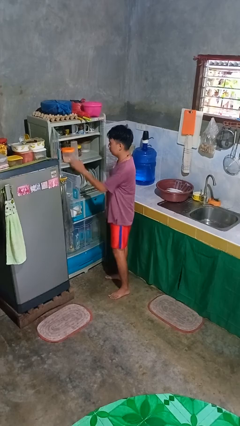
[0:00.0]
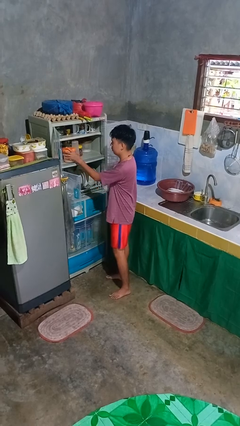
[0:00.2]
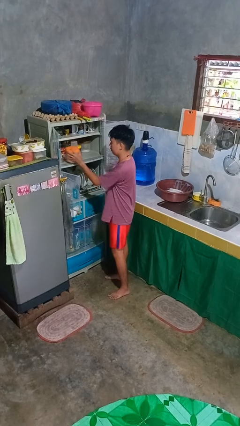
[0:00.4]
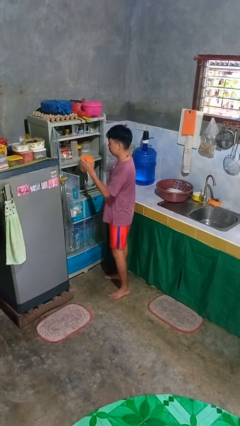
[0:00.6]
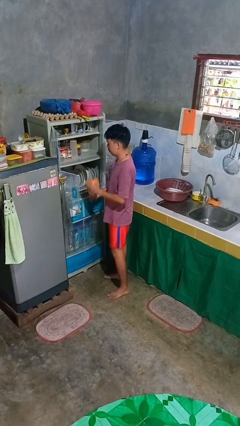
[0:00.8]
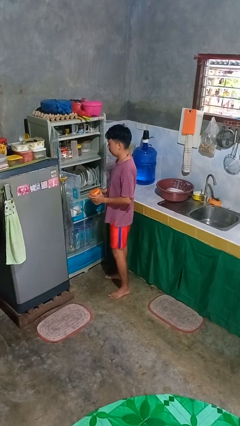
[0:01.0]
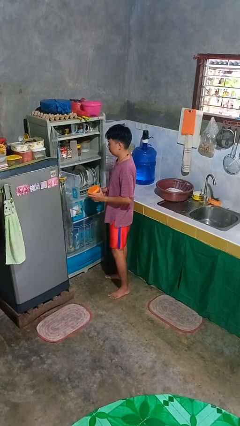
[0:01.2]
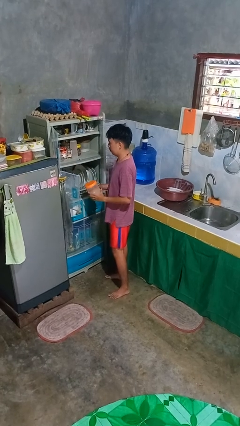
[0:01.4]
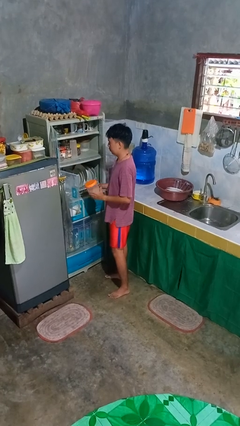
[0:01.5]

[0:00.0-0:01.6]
person takes object from cabinet

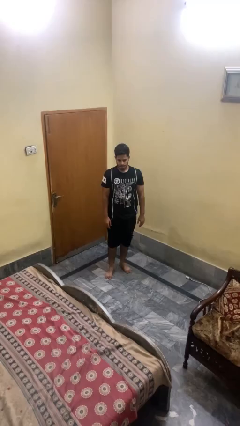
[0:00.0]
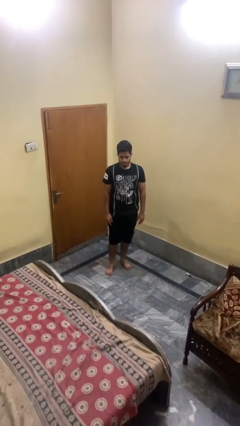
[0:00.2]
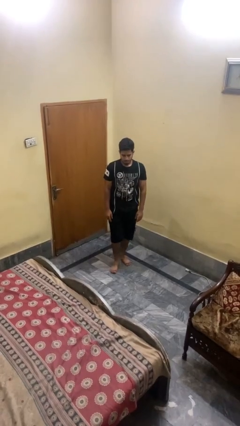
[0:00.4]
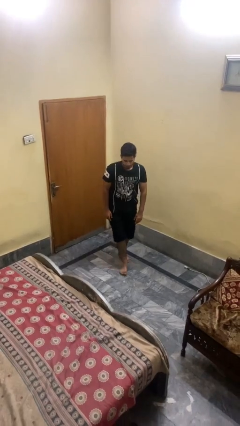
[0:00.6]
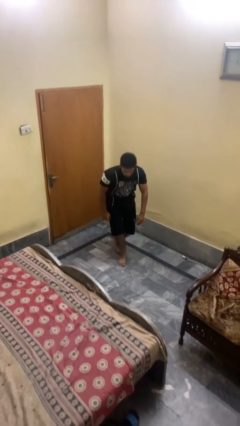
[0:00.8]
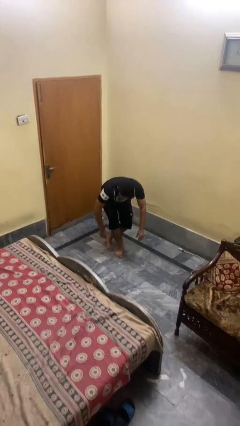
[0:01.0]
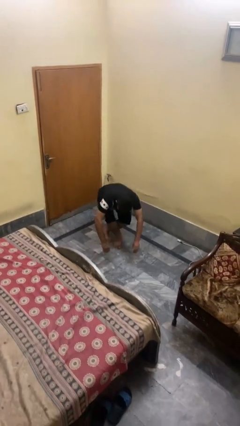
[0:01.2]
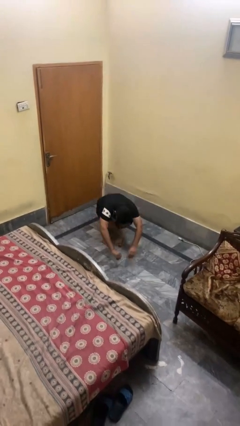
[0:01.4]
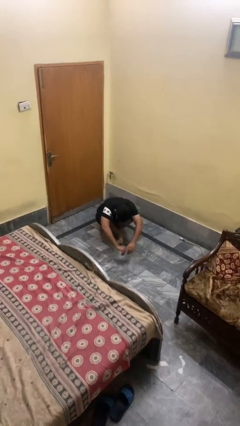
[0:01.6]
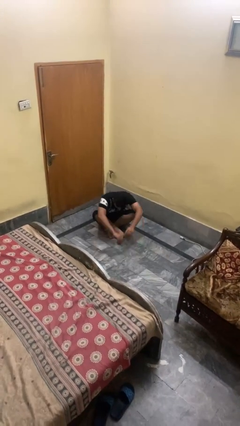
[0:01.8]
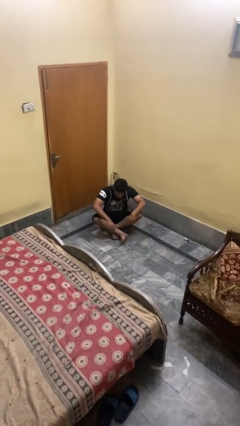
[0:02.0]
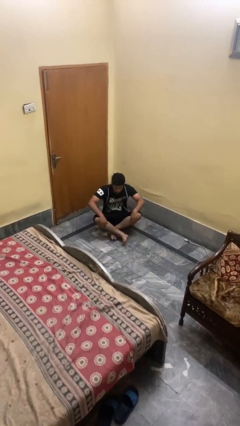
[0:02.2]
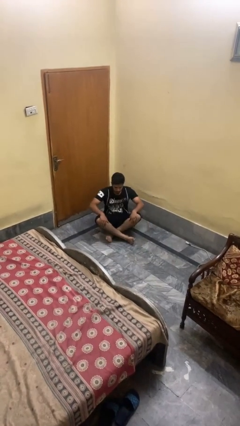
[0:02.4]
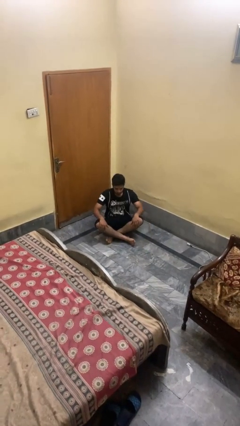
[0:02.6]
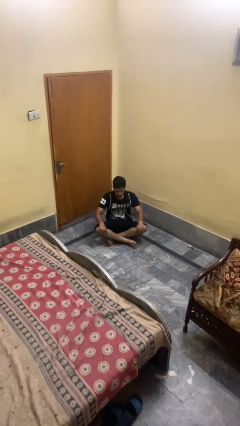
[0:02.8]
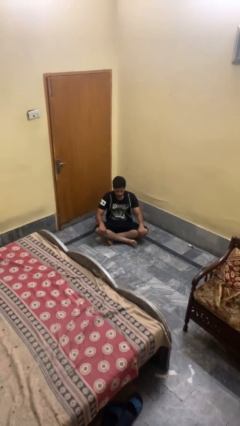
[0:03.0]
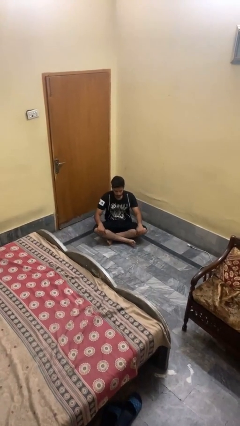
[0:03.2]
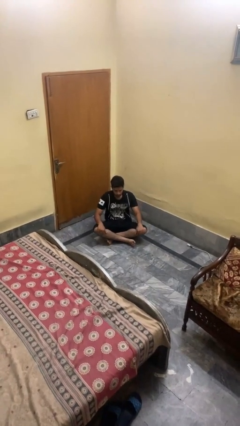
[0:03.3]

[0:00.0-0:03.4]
person sits crisscross

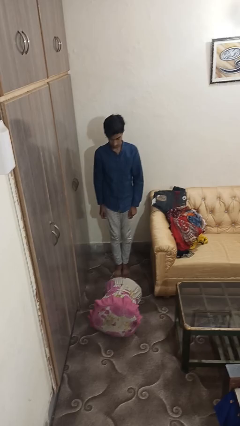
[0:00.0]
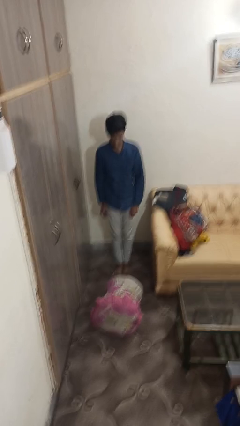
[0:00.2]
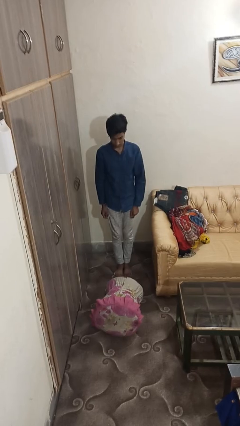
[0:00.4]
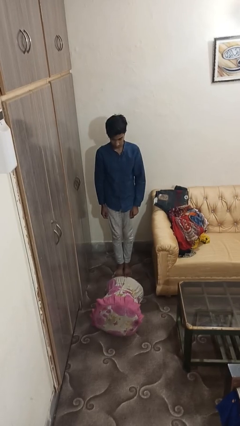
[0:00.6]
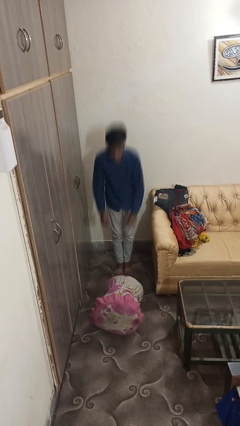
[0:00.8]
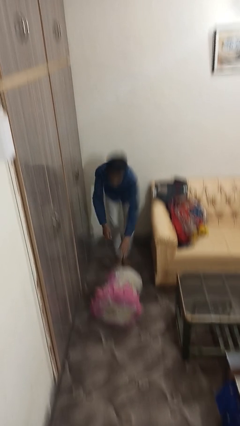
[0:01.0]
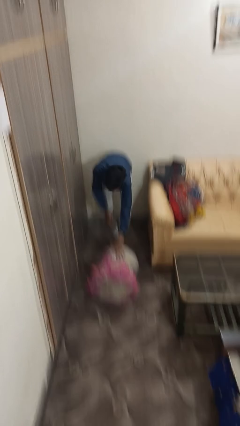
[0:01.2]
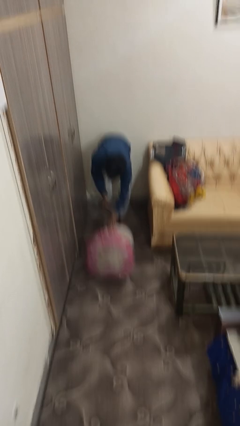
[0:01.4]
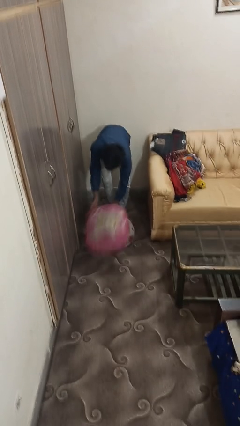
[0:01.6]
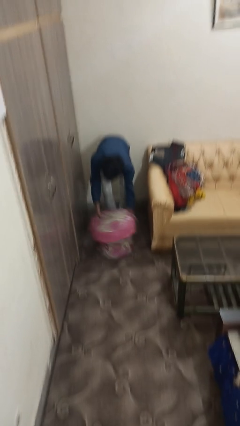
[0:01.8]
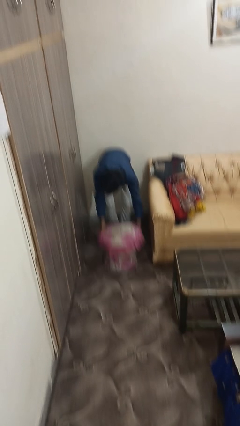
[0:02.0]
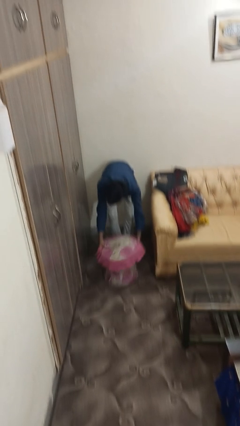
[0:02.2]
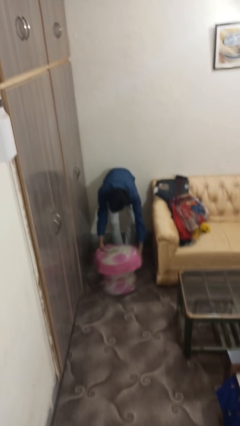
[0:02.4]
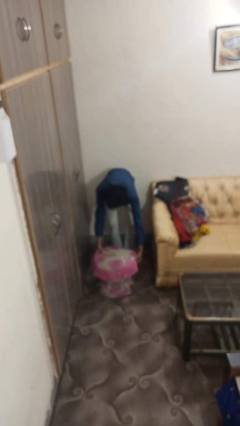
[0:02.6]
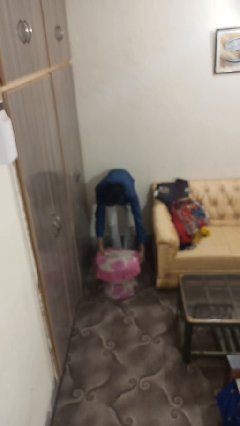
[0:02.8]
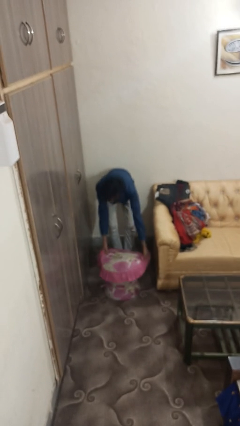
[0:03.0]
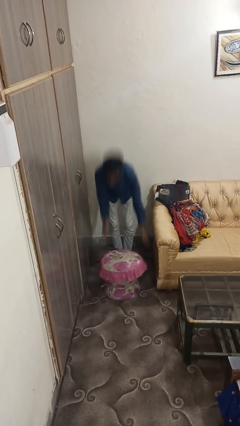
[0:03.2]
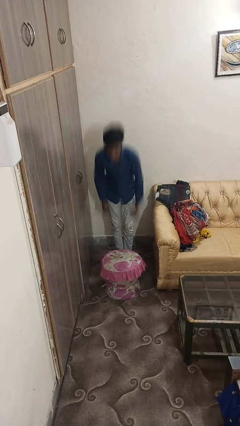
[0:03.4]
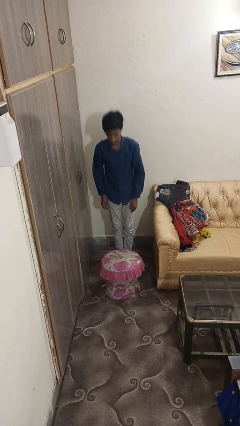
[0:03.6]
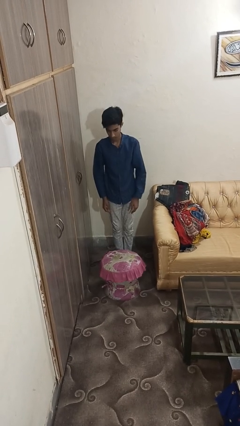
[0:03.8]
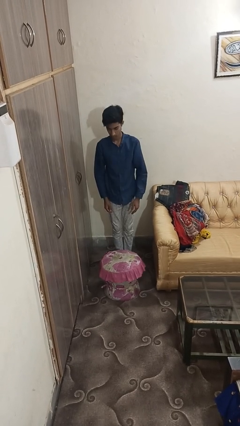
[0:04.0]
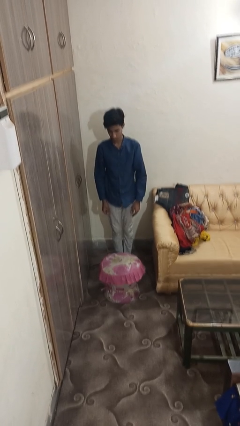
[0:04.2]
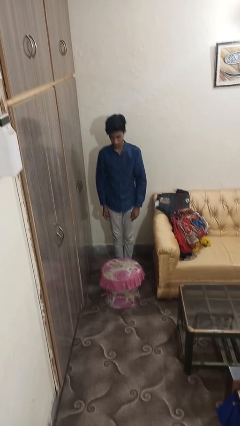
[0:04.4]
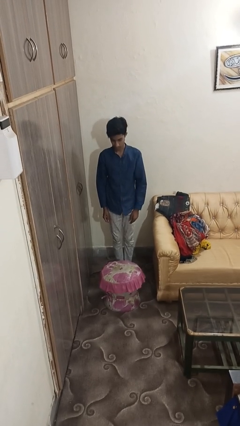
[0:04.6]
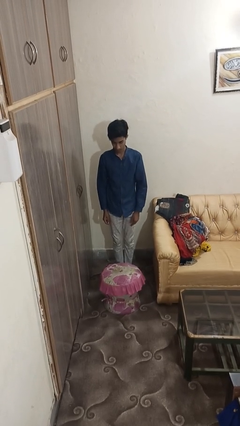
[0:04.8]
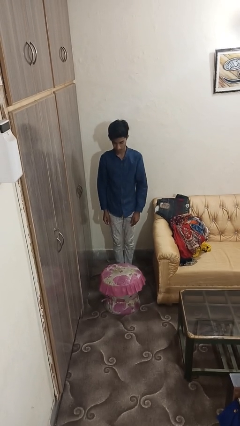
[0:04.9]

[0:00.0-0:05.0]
person sets upright furniture

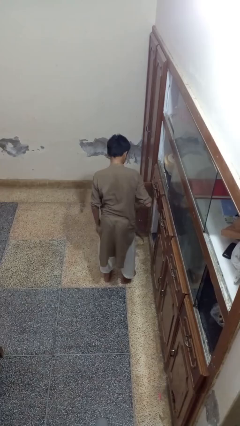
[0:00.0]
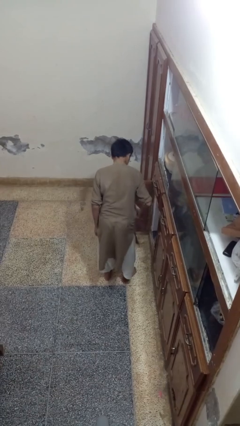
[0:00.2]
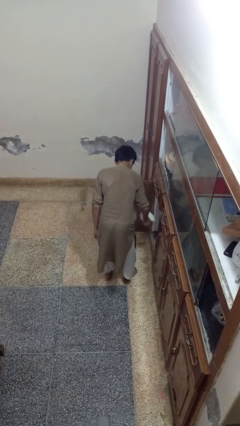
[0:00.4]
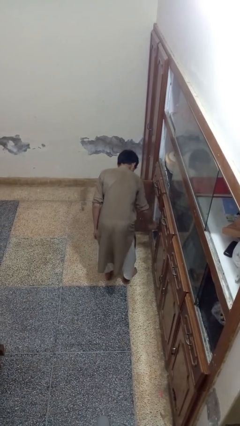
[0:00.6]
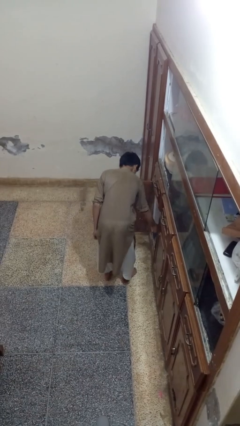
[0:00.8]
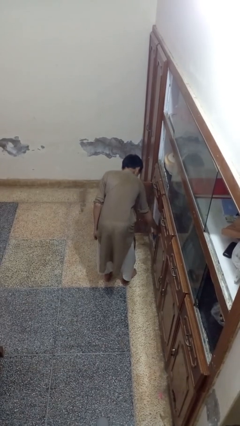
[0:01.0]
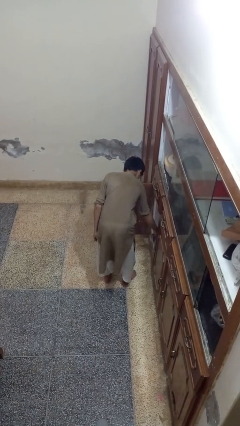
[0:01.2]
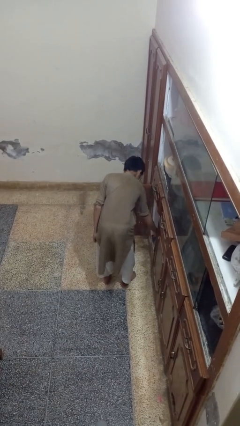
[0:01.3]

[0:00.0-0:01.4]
person puts object in cabinet

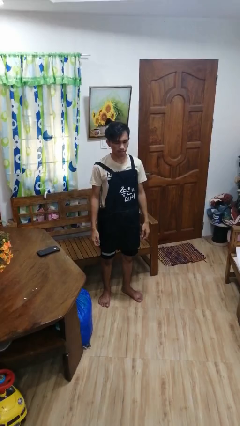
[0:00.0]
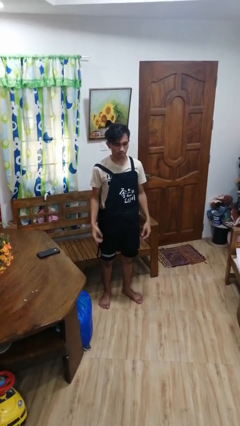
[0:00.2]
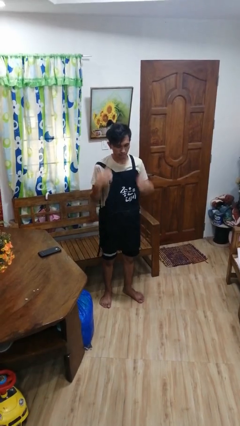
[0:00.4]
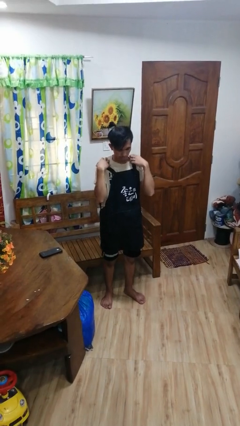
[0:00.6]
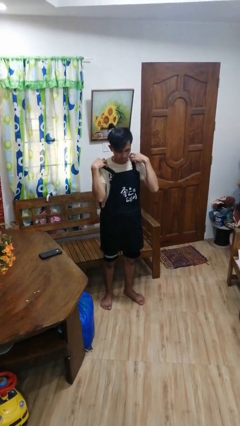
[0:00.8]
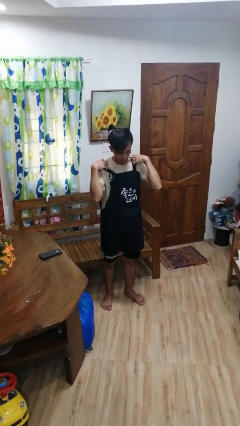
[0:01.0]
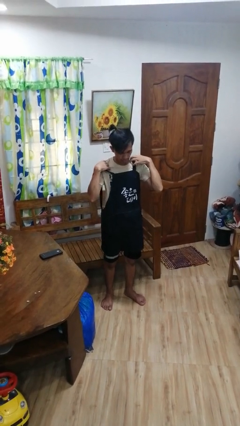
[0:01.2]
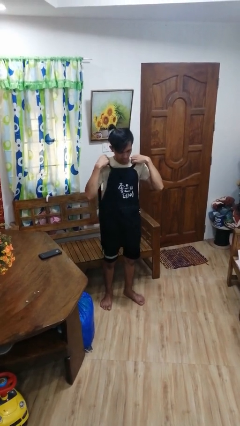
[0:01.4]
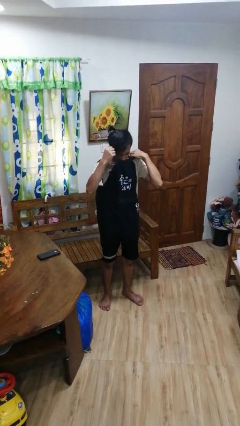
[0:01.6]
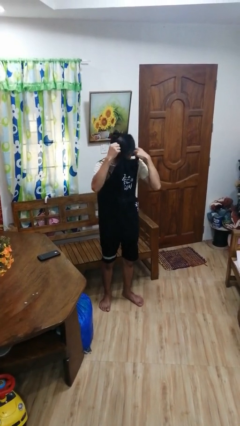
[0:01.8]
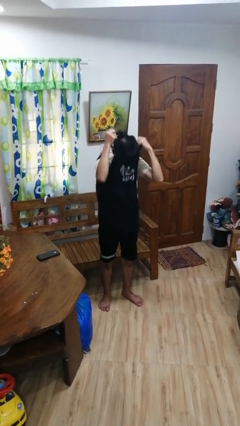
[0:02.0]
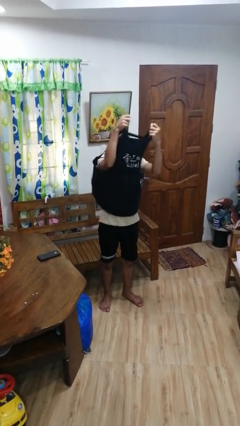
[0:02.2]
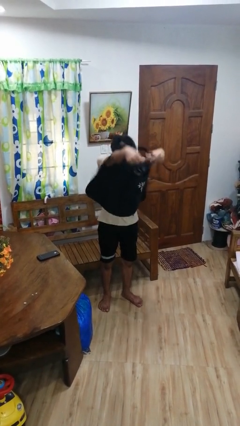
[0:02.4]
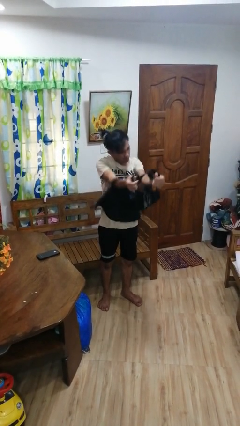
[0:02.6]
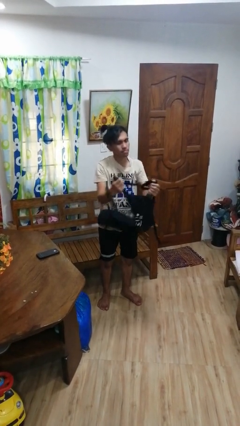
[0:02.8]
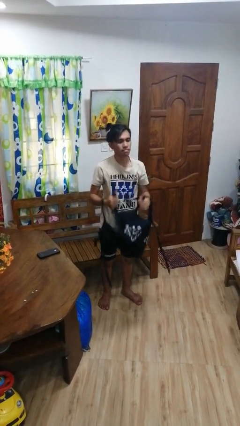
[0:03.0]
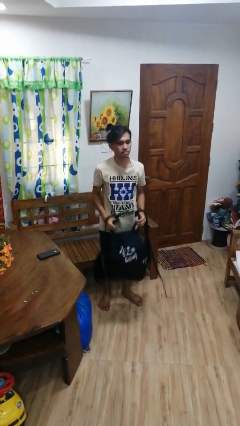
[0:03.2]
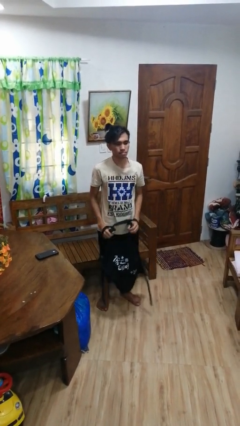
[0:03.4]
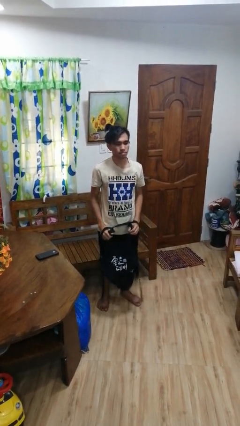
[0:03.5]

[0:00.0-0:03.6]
person takes off apron

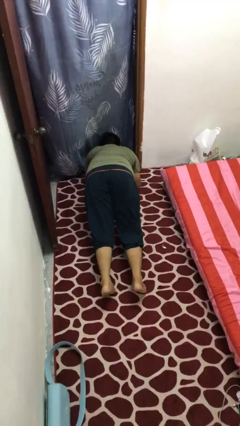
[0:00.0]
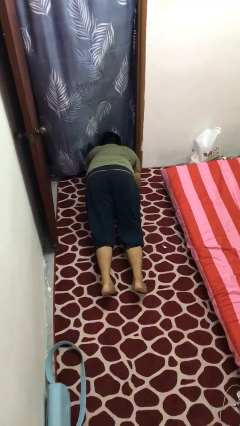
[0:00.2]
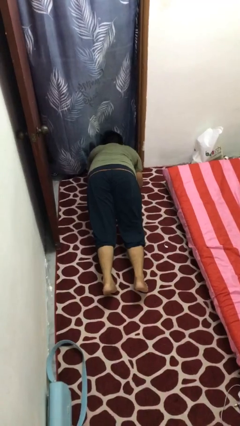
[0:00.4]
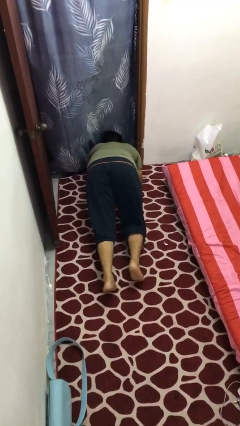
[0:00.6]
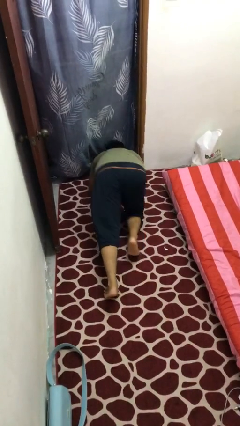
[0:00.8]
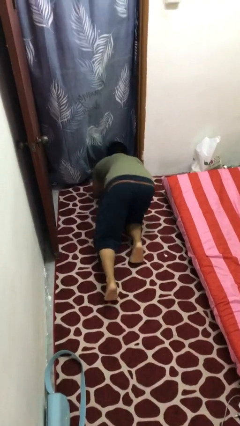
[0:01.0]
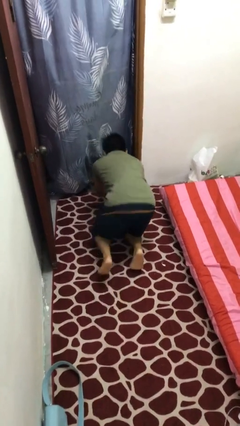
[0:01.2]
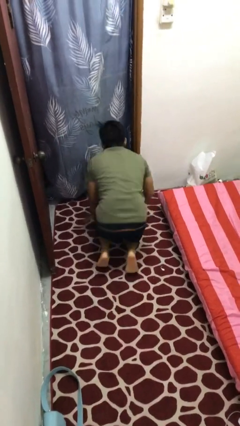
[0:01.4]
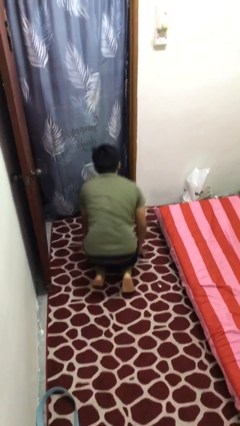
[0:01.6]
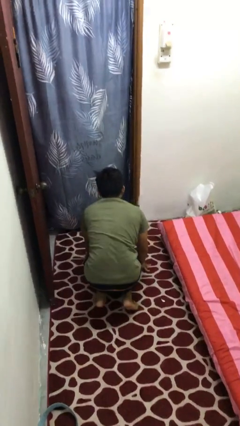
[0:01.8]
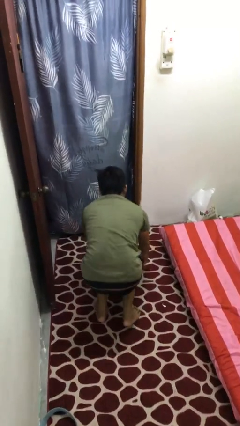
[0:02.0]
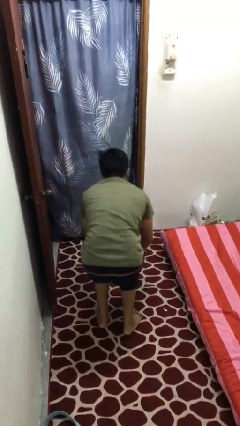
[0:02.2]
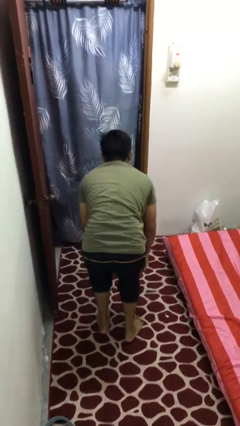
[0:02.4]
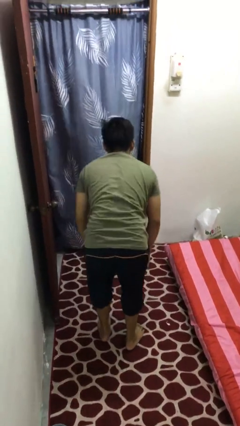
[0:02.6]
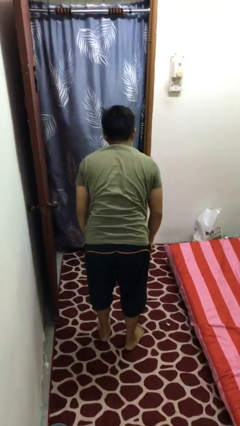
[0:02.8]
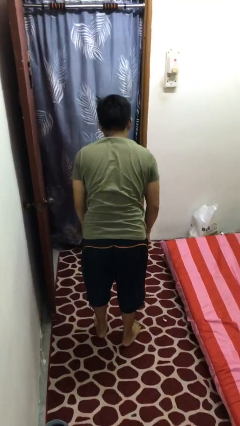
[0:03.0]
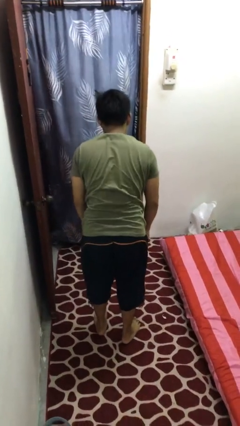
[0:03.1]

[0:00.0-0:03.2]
person stands up from floor
